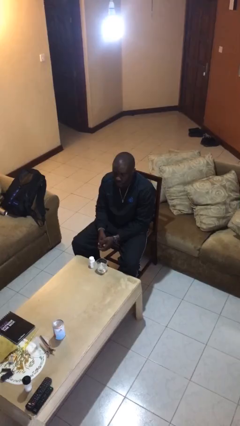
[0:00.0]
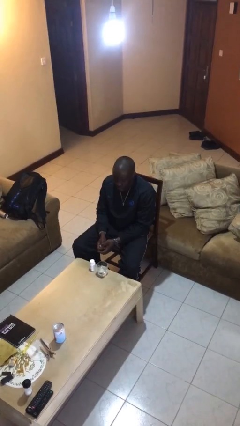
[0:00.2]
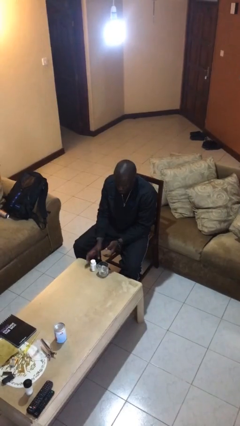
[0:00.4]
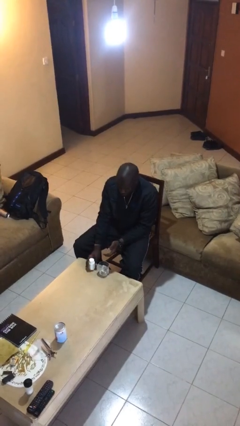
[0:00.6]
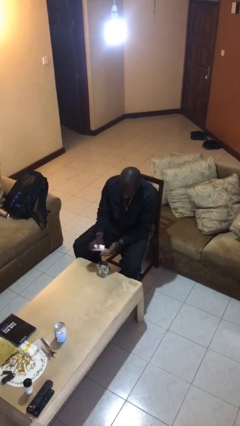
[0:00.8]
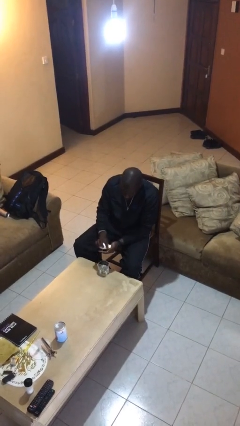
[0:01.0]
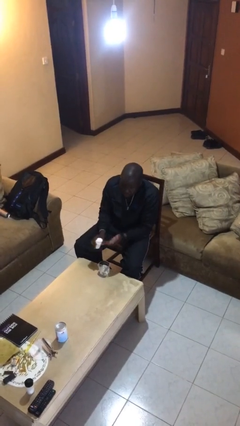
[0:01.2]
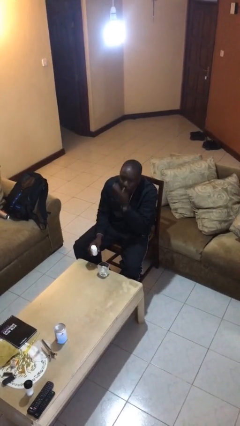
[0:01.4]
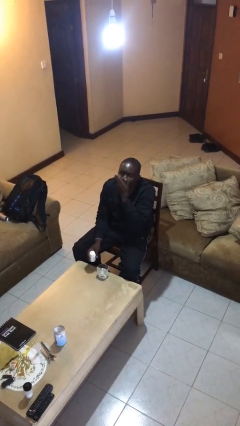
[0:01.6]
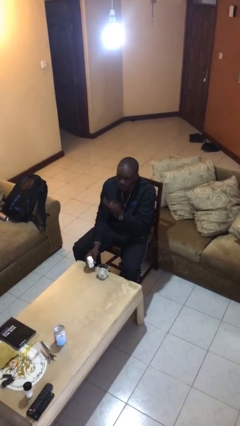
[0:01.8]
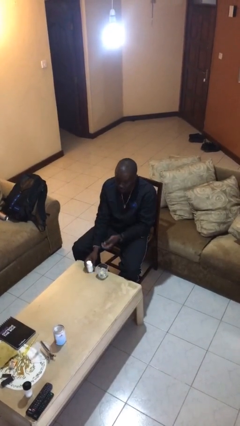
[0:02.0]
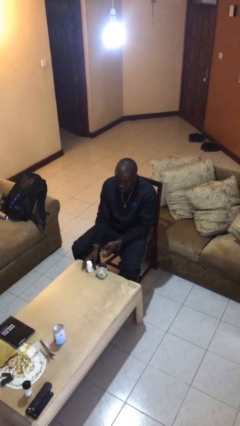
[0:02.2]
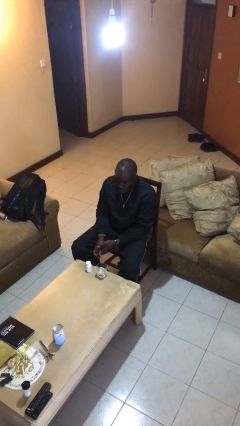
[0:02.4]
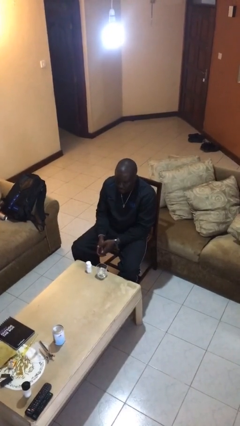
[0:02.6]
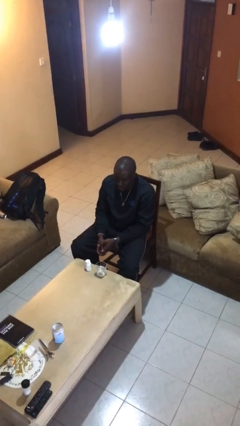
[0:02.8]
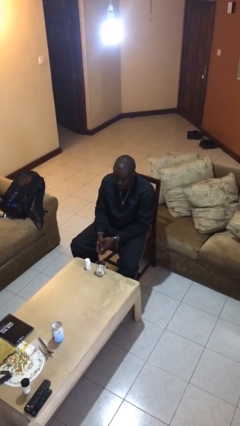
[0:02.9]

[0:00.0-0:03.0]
person takes medicine pills

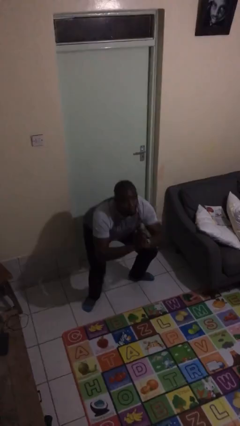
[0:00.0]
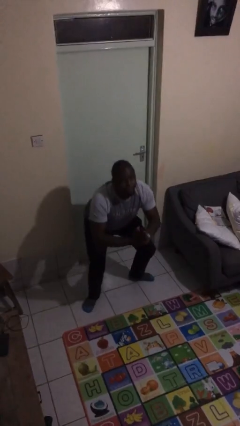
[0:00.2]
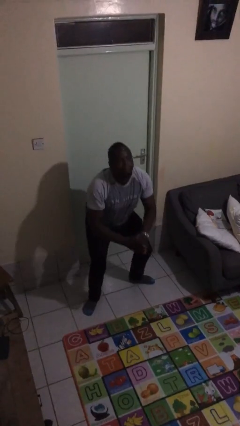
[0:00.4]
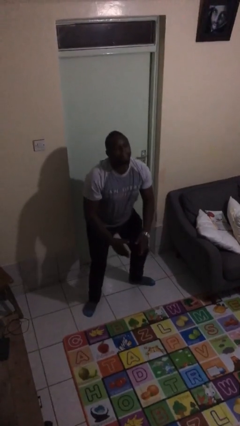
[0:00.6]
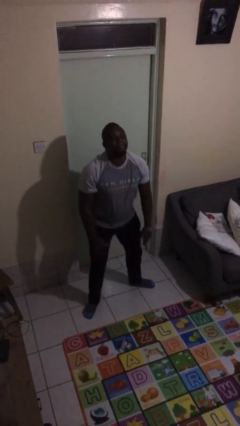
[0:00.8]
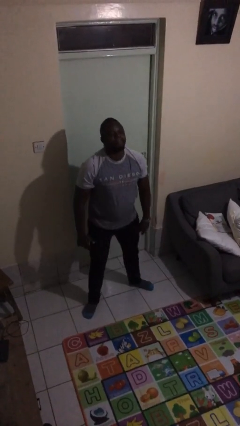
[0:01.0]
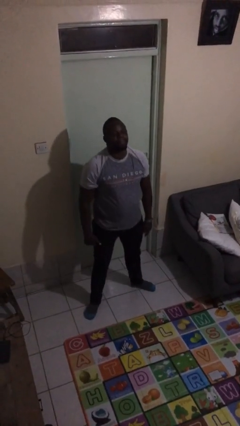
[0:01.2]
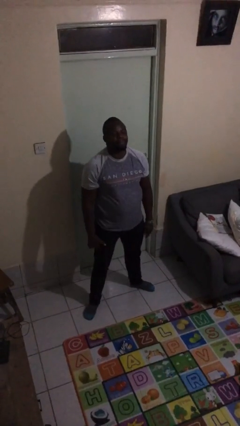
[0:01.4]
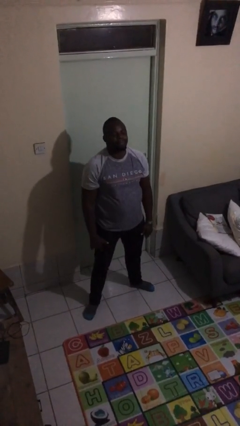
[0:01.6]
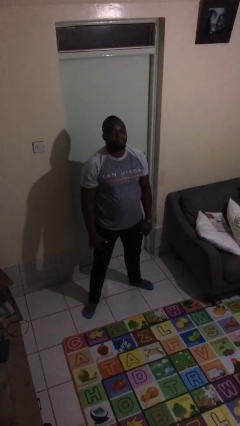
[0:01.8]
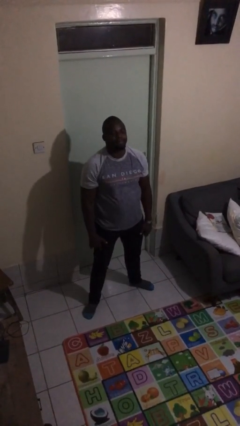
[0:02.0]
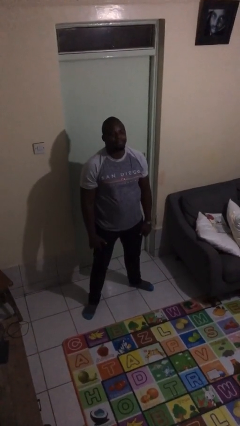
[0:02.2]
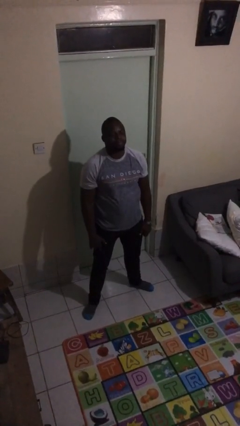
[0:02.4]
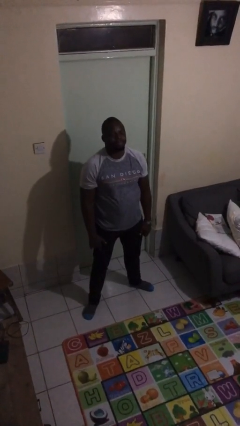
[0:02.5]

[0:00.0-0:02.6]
person stands up

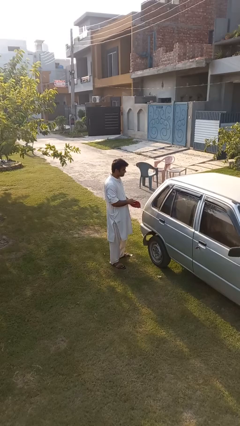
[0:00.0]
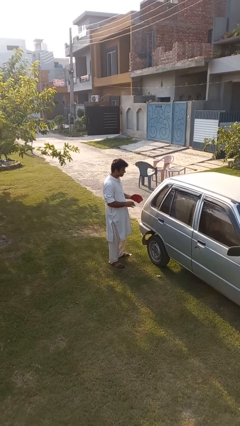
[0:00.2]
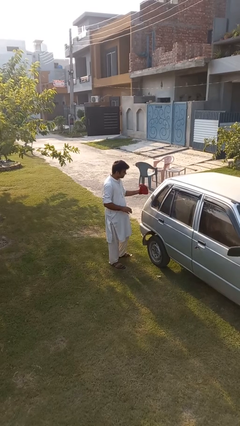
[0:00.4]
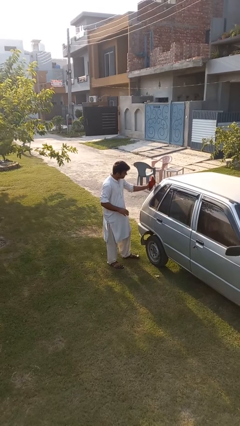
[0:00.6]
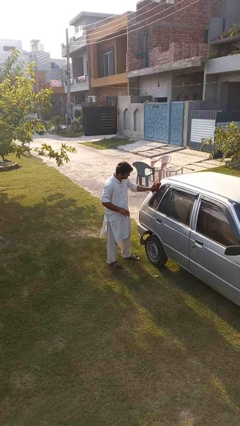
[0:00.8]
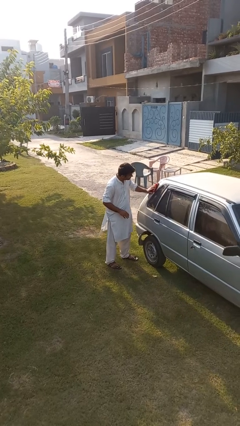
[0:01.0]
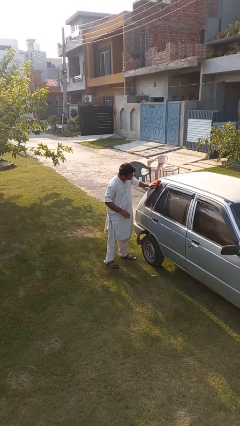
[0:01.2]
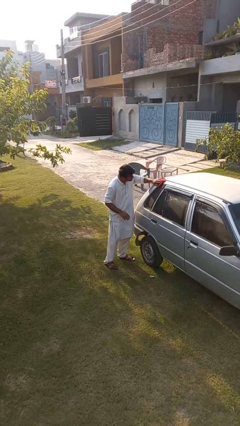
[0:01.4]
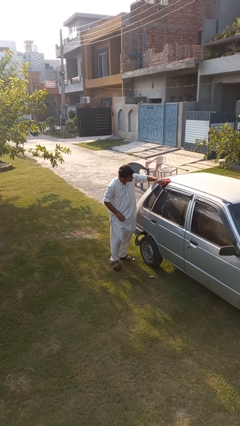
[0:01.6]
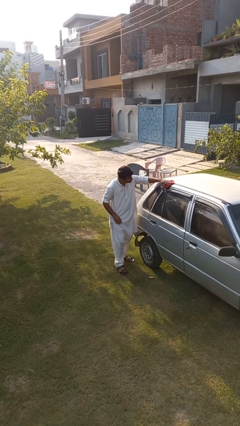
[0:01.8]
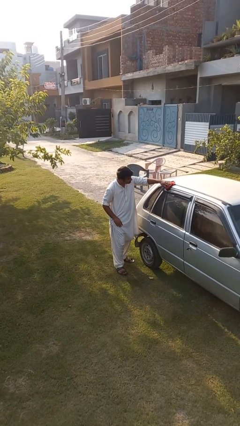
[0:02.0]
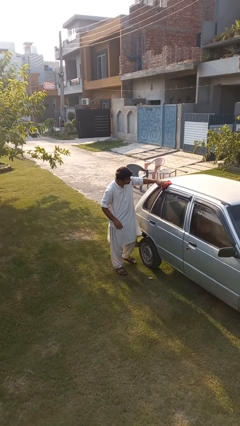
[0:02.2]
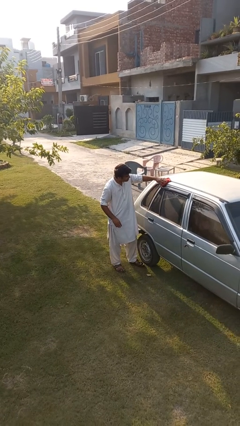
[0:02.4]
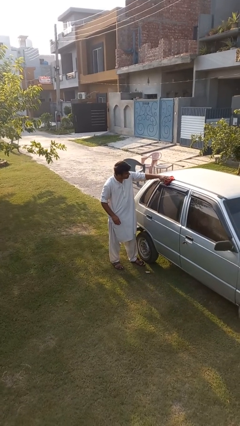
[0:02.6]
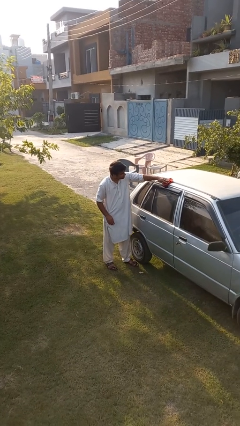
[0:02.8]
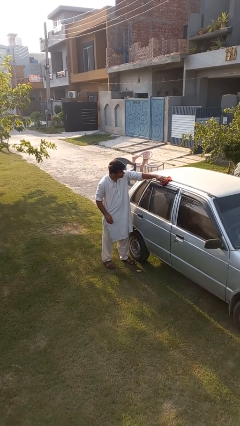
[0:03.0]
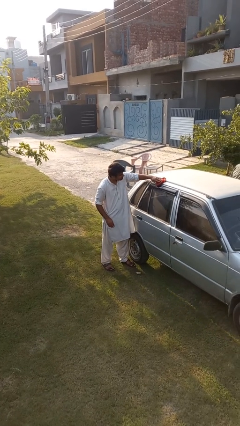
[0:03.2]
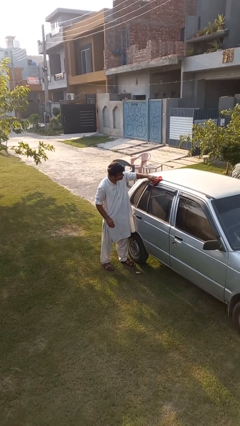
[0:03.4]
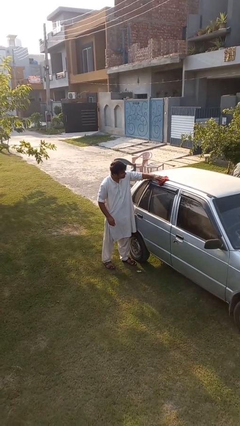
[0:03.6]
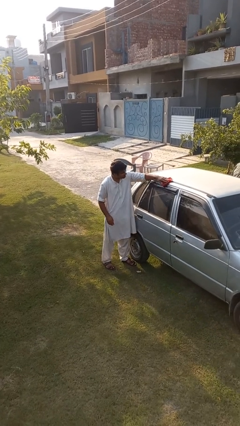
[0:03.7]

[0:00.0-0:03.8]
person polishes car with rag

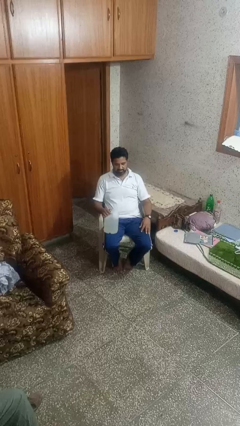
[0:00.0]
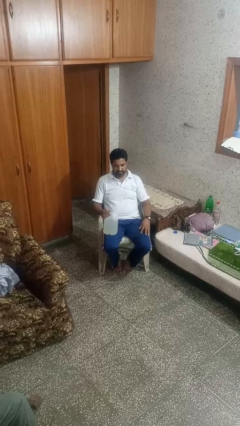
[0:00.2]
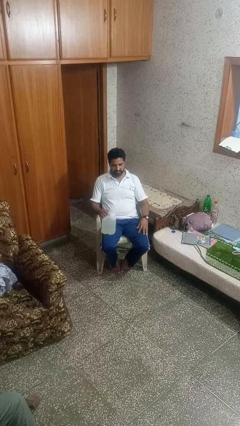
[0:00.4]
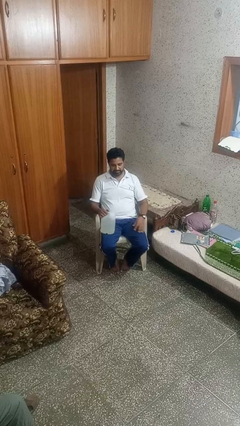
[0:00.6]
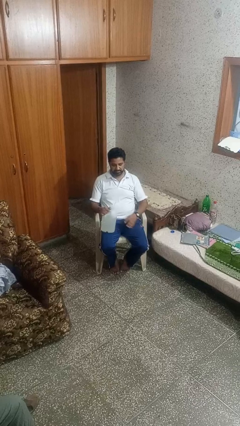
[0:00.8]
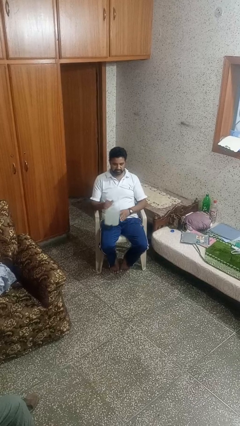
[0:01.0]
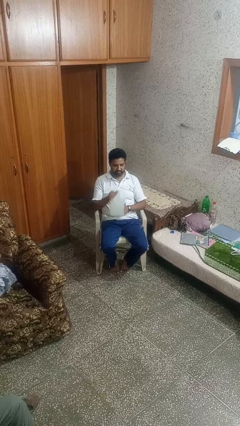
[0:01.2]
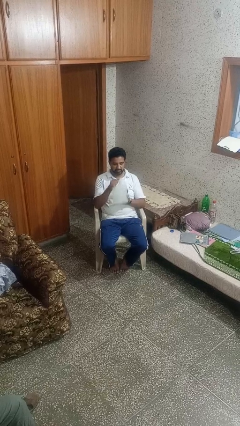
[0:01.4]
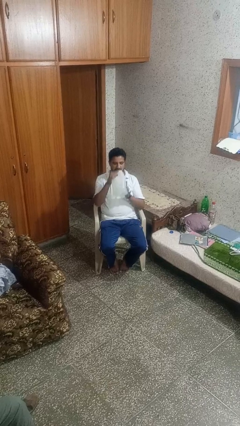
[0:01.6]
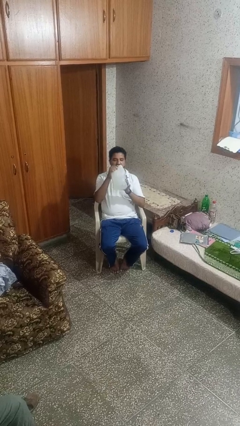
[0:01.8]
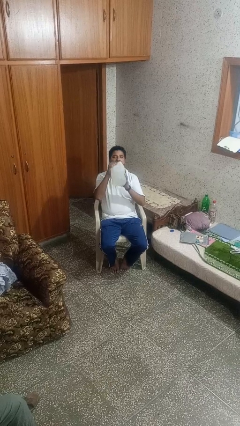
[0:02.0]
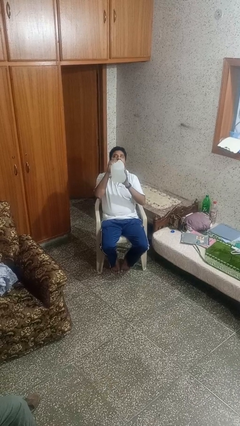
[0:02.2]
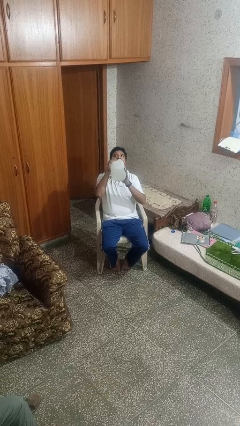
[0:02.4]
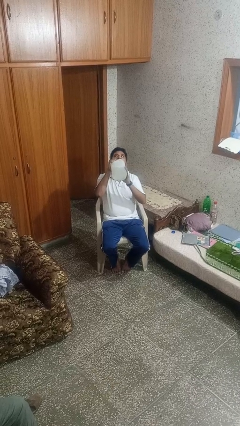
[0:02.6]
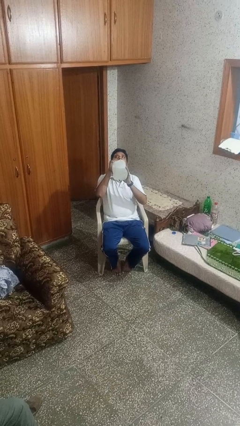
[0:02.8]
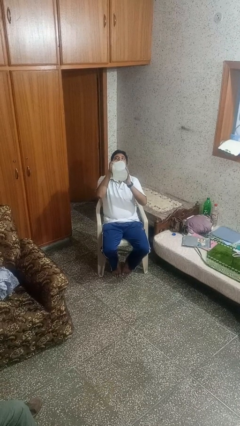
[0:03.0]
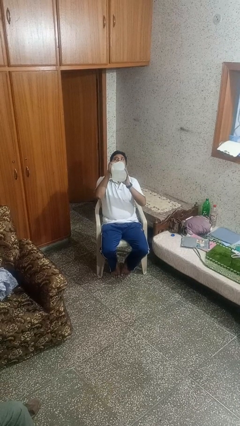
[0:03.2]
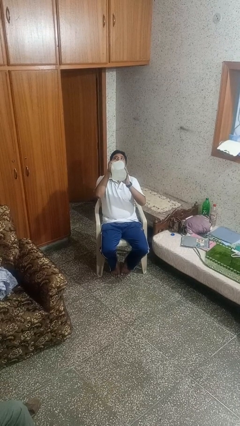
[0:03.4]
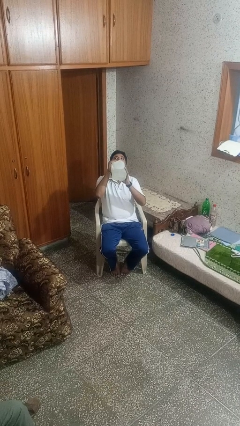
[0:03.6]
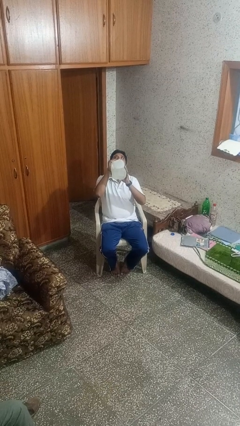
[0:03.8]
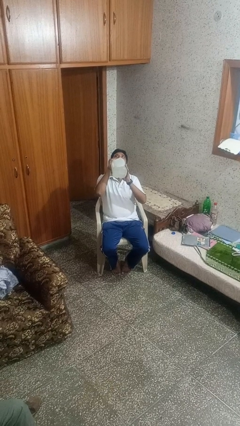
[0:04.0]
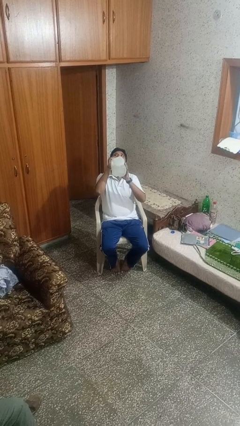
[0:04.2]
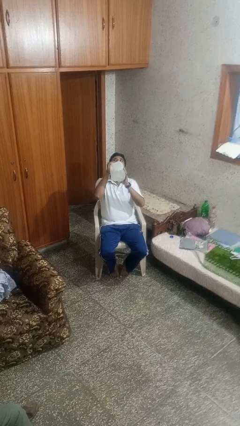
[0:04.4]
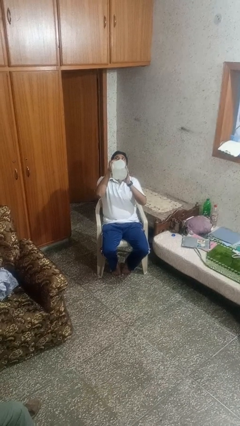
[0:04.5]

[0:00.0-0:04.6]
person drinks from bottle

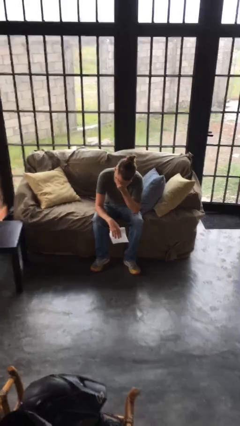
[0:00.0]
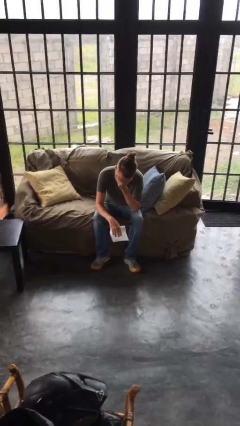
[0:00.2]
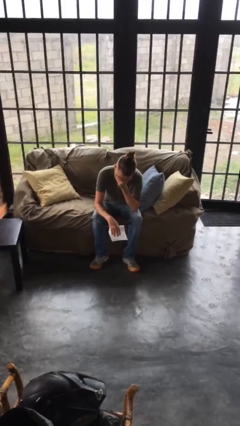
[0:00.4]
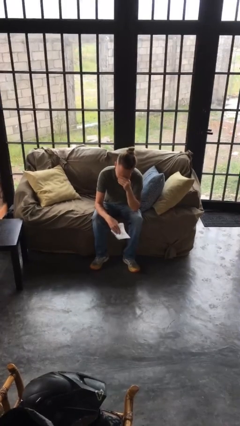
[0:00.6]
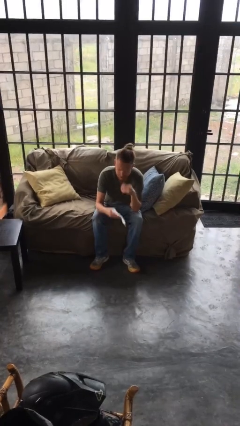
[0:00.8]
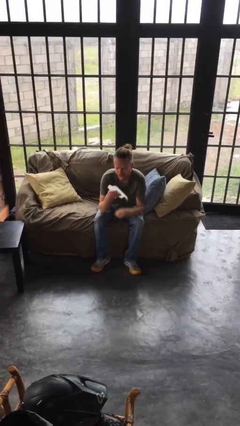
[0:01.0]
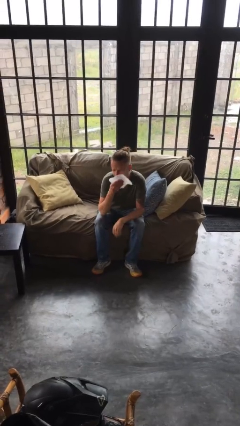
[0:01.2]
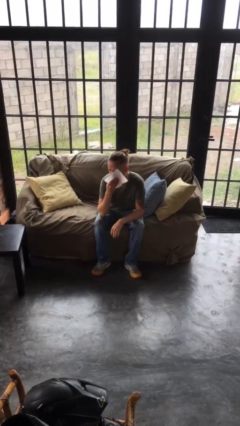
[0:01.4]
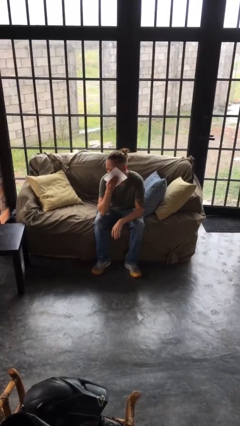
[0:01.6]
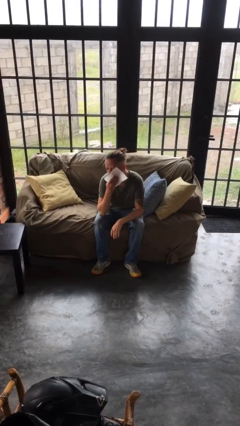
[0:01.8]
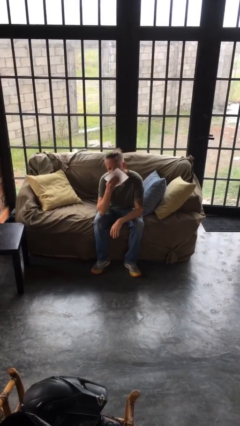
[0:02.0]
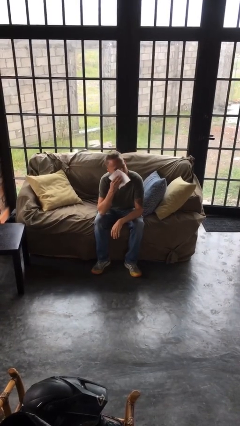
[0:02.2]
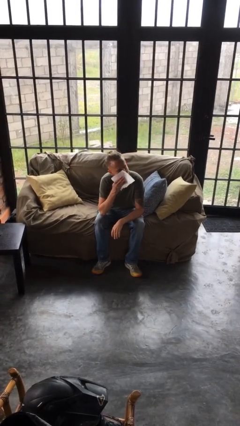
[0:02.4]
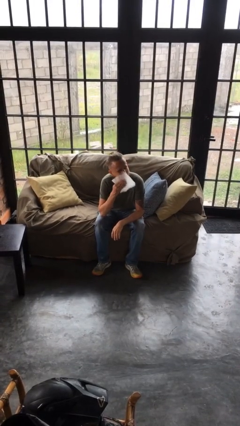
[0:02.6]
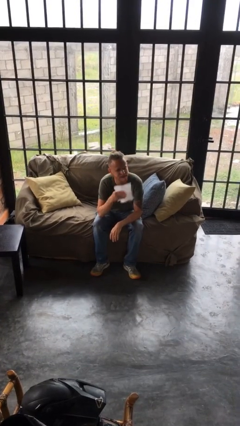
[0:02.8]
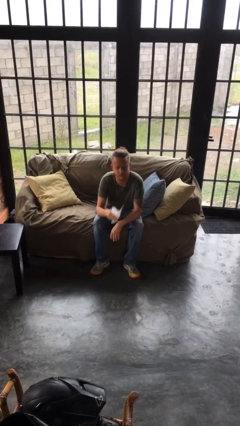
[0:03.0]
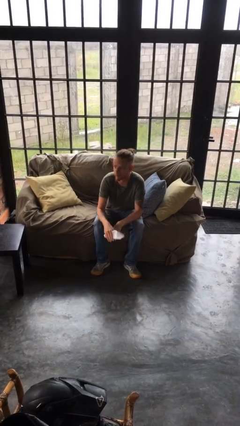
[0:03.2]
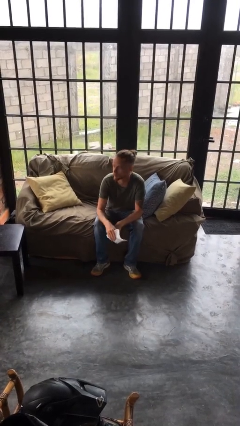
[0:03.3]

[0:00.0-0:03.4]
person wipes mouth with napkin
